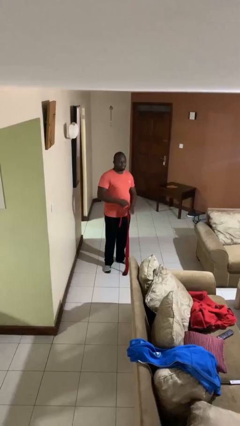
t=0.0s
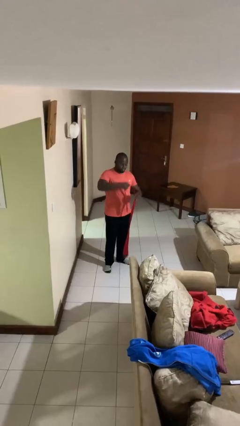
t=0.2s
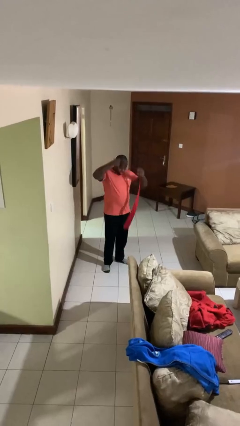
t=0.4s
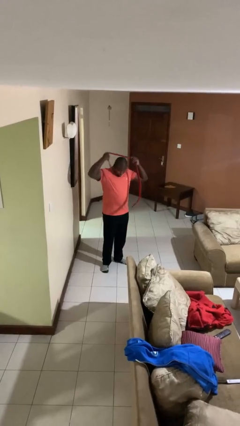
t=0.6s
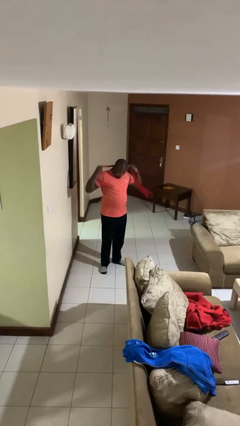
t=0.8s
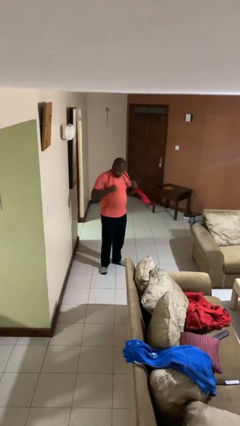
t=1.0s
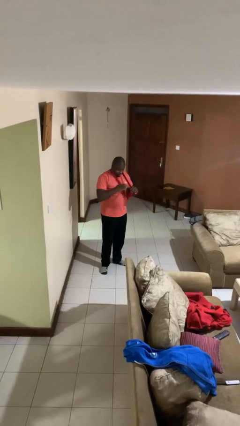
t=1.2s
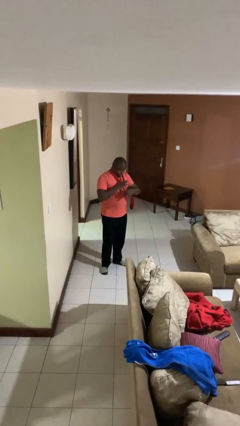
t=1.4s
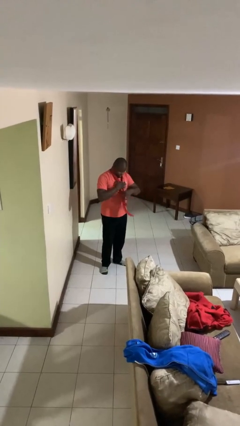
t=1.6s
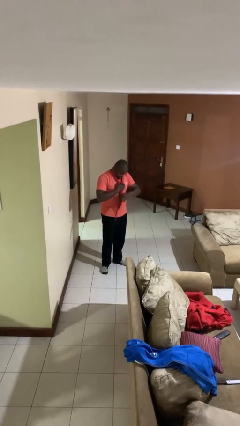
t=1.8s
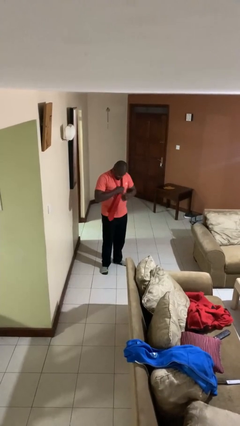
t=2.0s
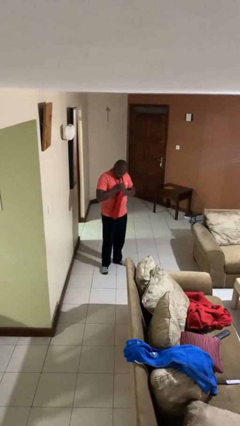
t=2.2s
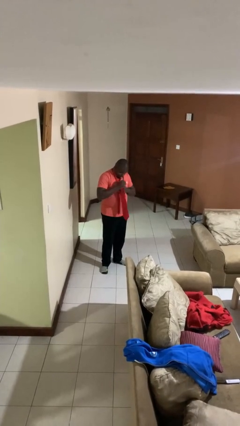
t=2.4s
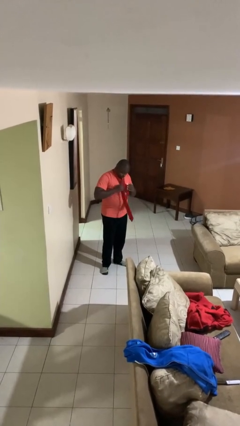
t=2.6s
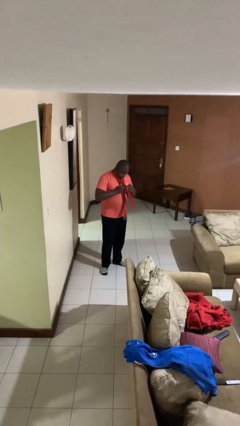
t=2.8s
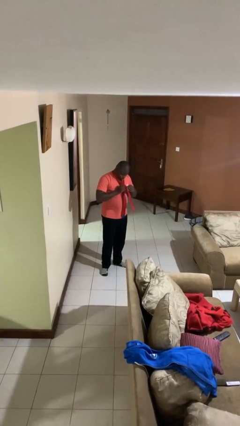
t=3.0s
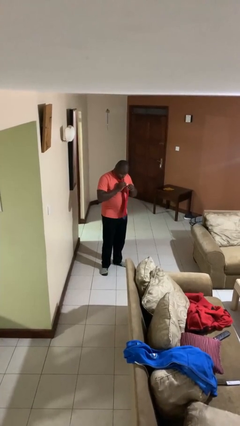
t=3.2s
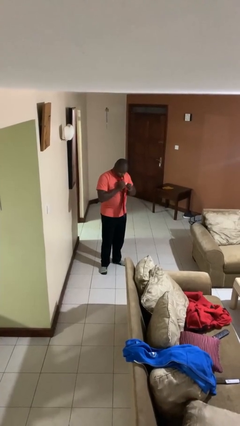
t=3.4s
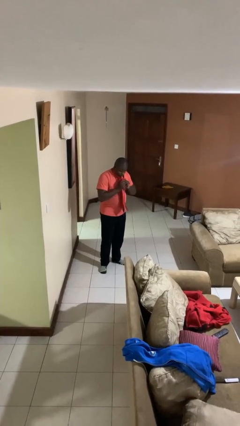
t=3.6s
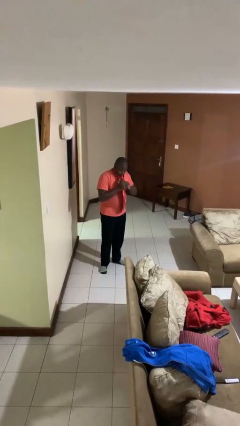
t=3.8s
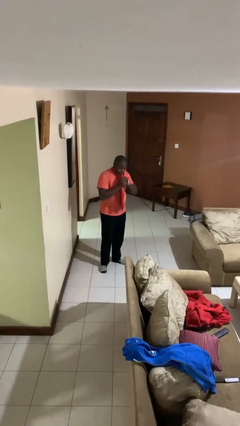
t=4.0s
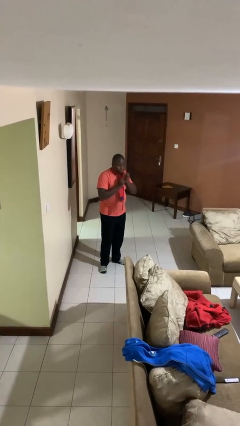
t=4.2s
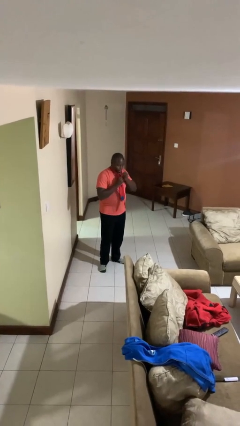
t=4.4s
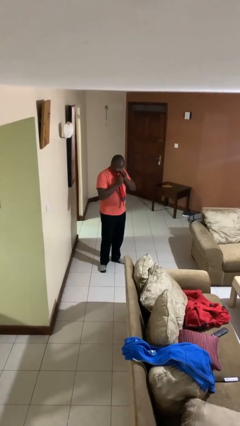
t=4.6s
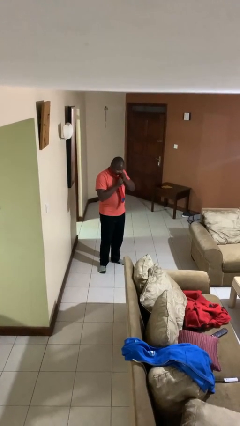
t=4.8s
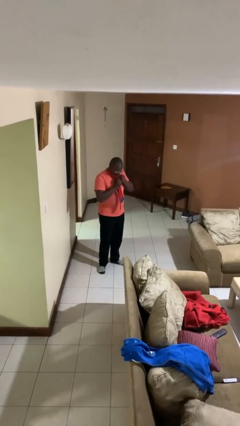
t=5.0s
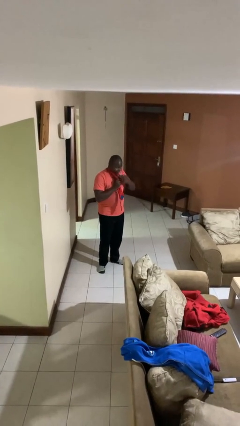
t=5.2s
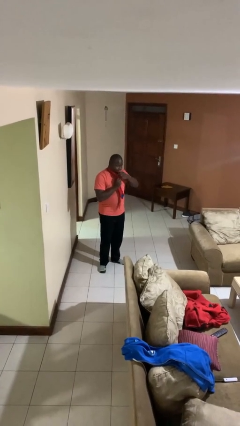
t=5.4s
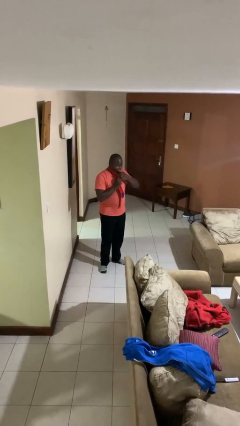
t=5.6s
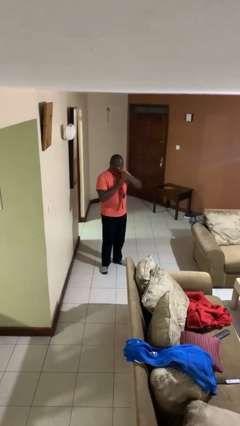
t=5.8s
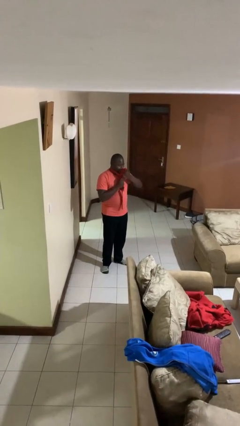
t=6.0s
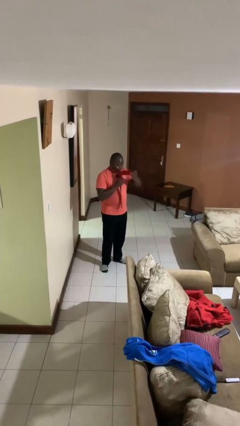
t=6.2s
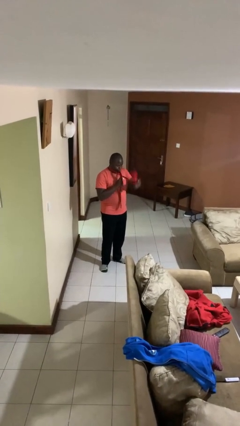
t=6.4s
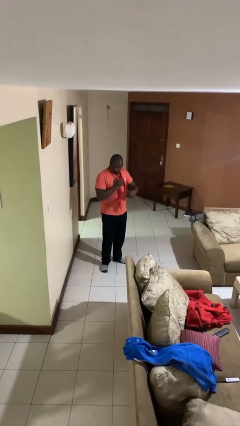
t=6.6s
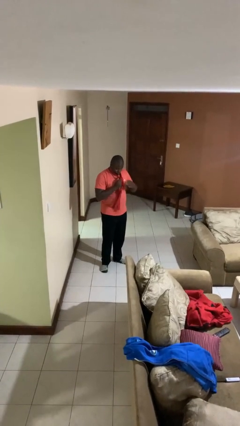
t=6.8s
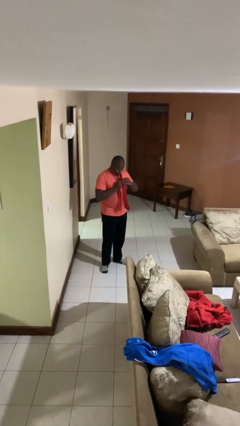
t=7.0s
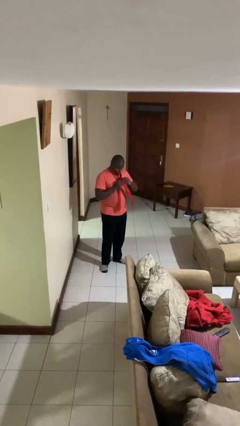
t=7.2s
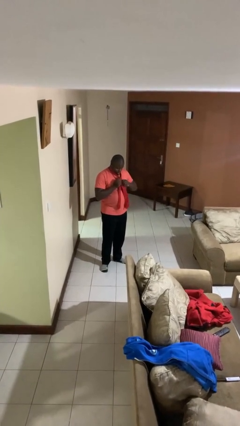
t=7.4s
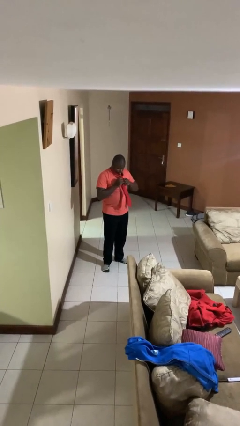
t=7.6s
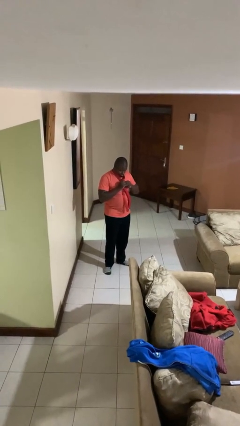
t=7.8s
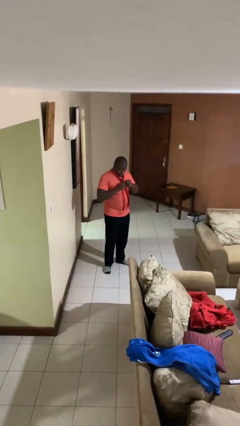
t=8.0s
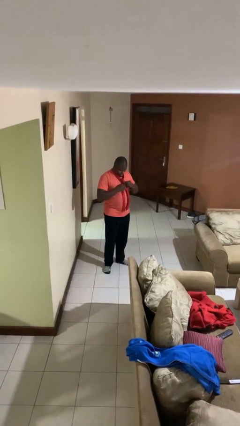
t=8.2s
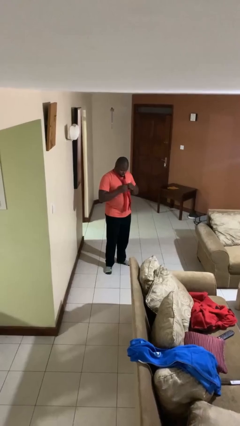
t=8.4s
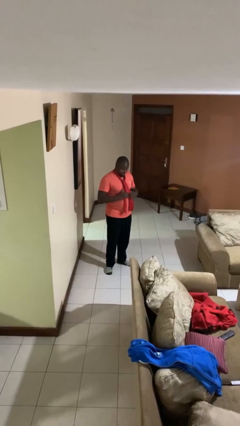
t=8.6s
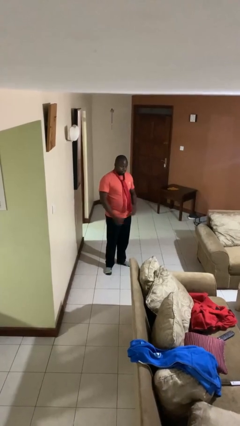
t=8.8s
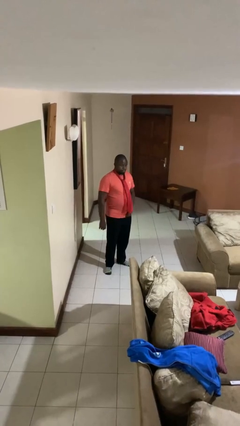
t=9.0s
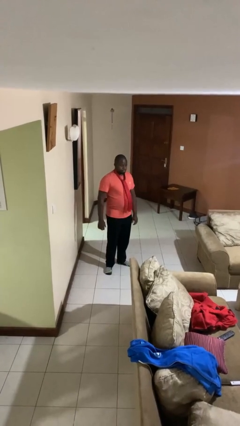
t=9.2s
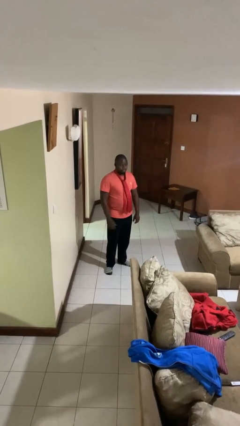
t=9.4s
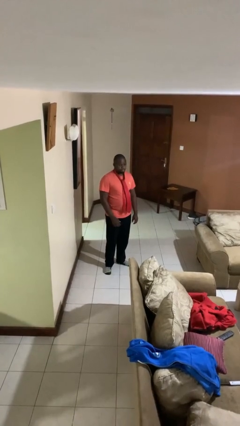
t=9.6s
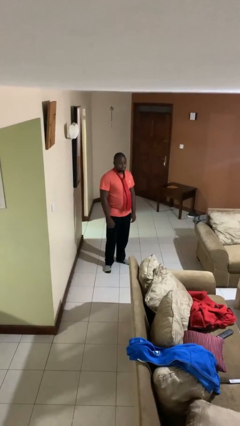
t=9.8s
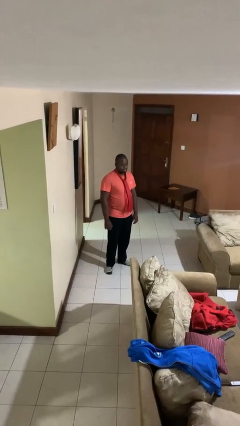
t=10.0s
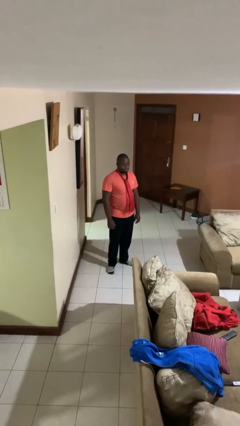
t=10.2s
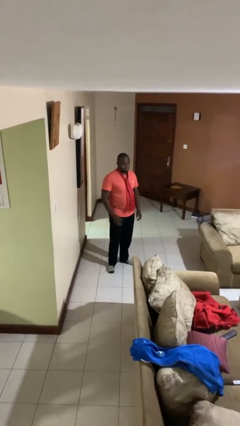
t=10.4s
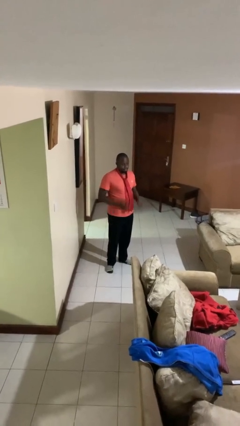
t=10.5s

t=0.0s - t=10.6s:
person puts on necktie

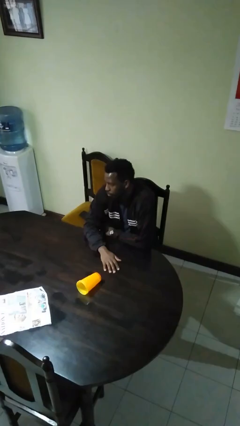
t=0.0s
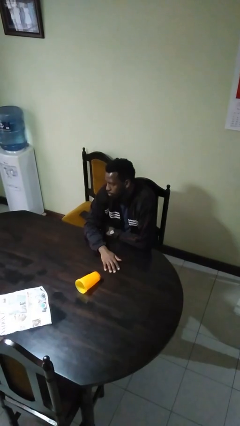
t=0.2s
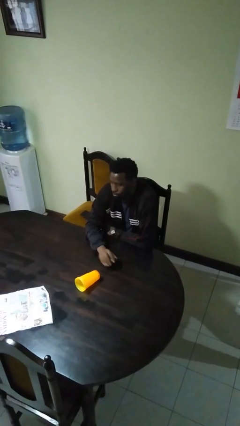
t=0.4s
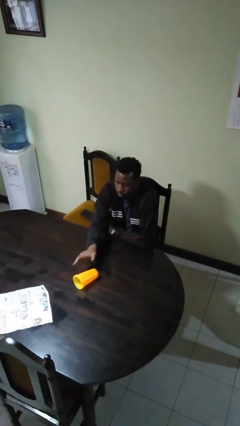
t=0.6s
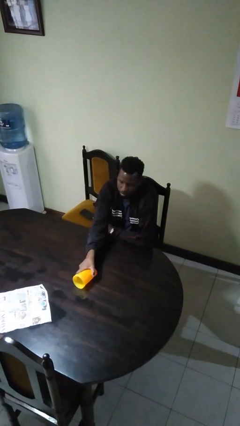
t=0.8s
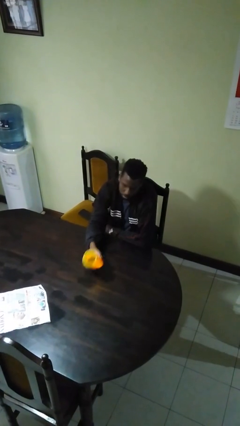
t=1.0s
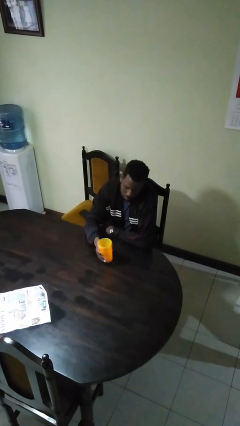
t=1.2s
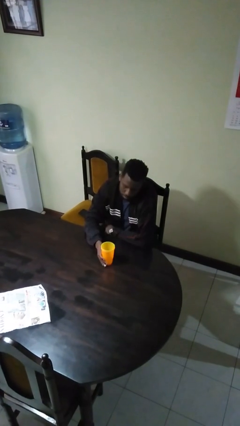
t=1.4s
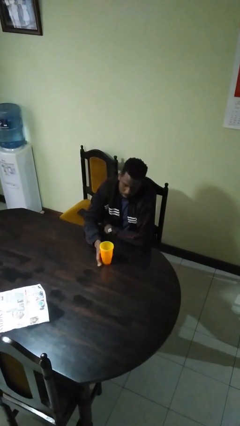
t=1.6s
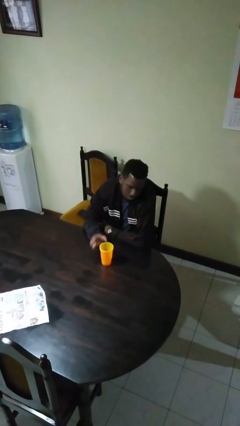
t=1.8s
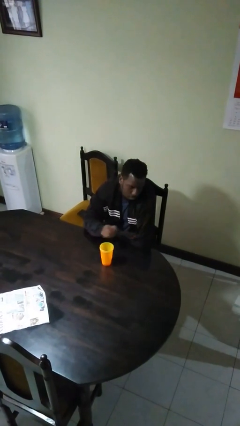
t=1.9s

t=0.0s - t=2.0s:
person sets upright glass

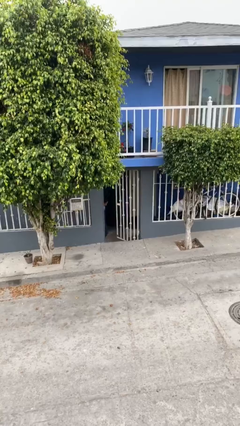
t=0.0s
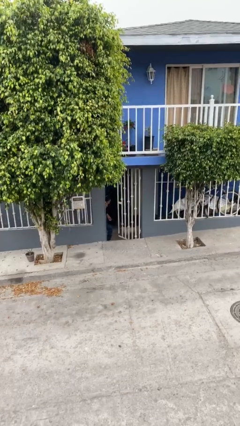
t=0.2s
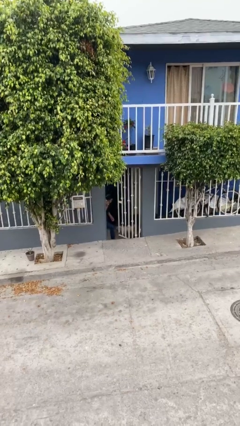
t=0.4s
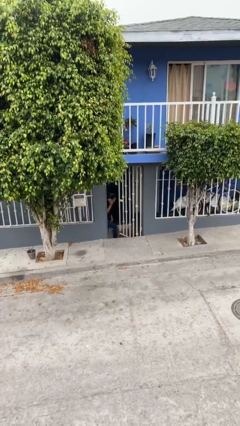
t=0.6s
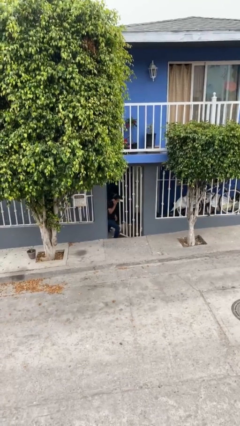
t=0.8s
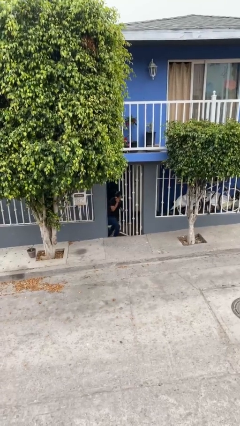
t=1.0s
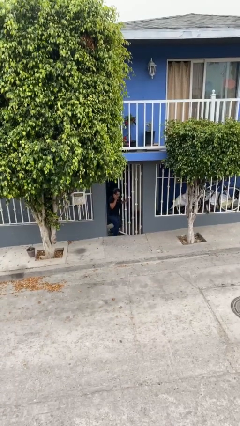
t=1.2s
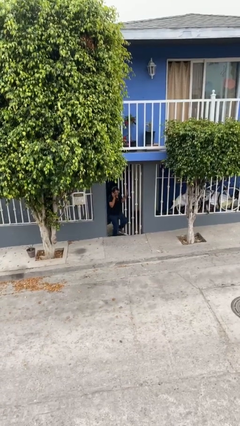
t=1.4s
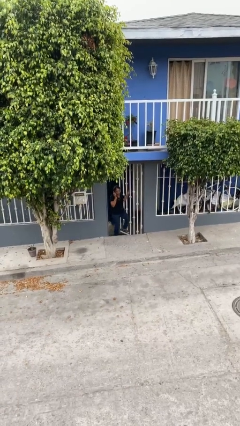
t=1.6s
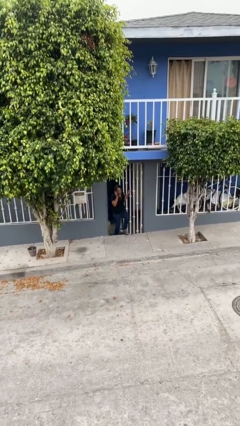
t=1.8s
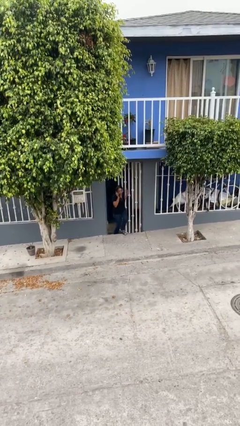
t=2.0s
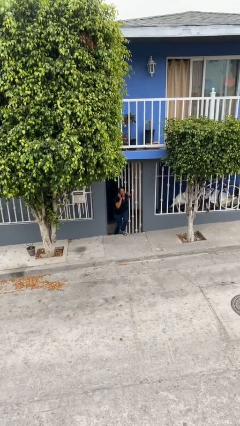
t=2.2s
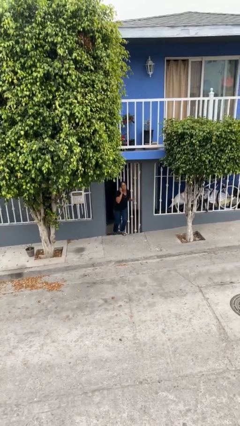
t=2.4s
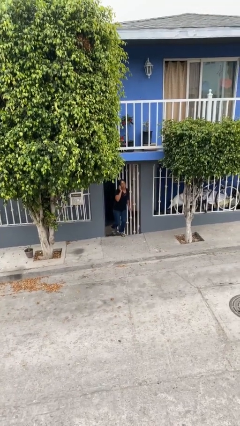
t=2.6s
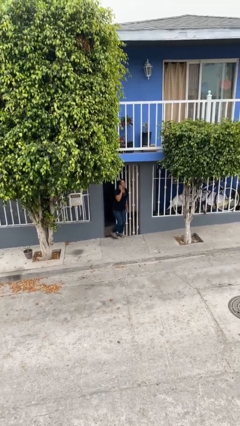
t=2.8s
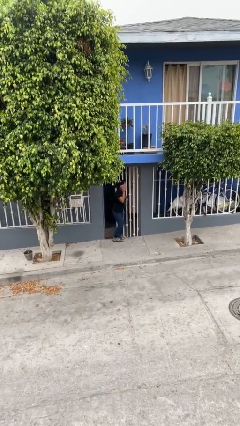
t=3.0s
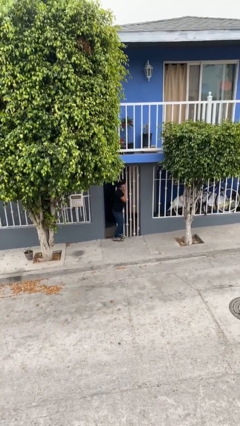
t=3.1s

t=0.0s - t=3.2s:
person enters scene through structure

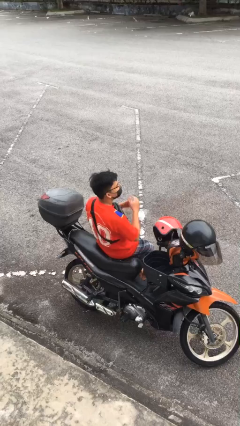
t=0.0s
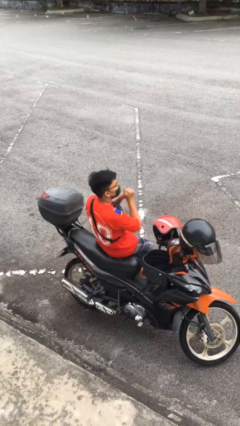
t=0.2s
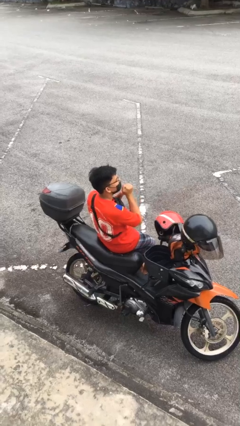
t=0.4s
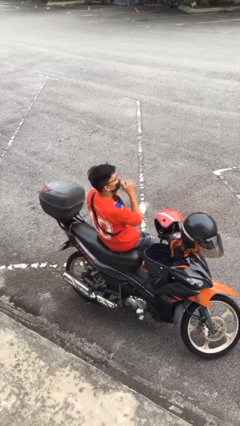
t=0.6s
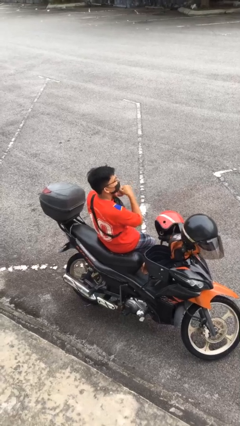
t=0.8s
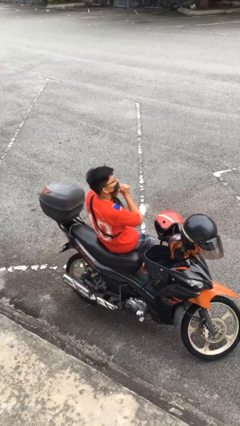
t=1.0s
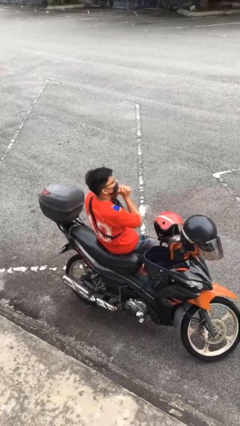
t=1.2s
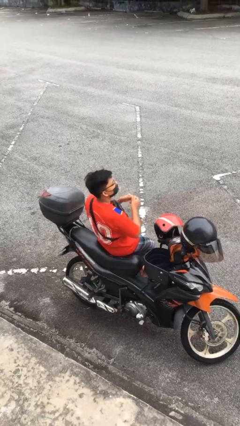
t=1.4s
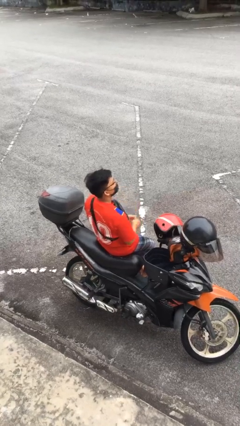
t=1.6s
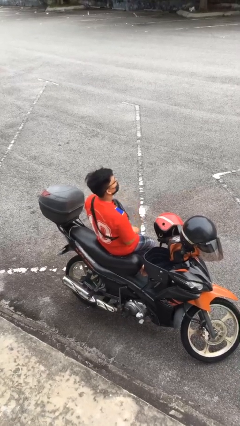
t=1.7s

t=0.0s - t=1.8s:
person cracks knuckles

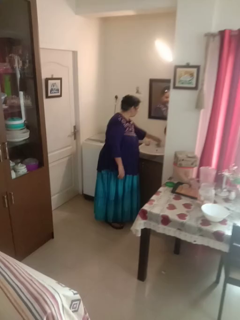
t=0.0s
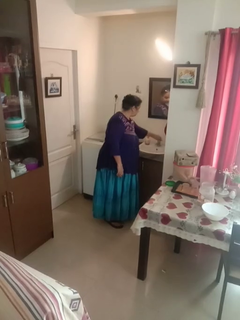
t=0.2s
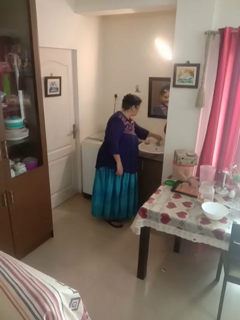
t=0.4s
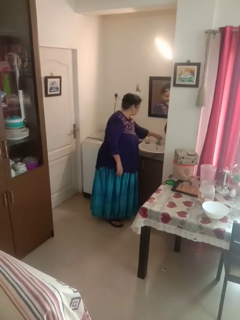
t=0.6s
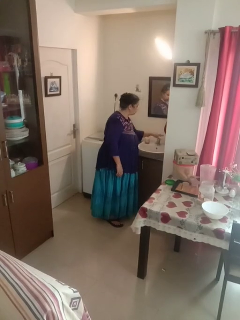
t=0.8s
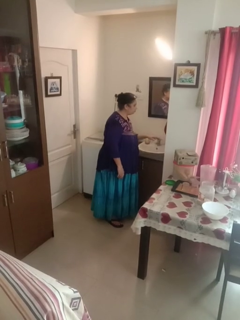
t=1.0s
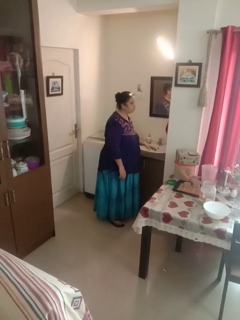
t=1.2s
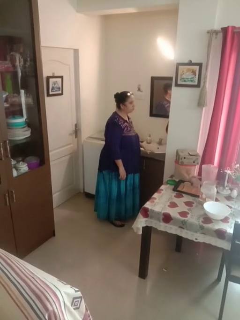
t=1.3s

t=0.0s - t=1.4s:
person turns on faucet
